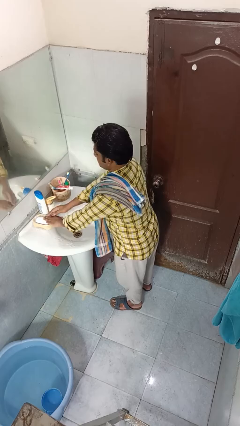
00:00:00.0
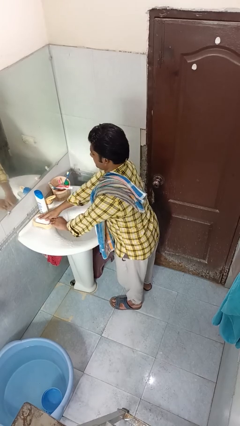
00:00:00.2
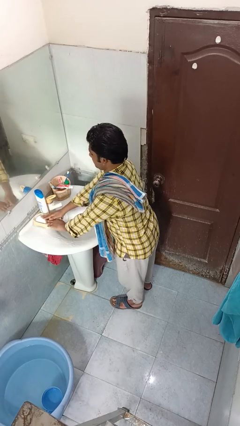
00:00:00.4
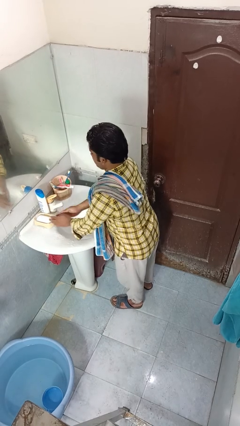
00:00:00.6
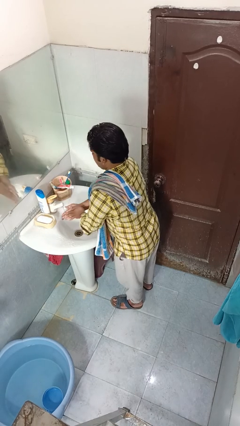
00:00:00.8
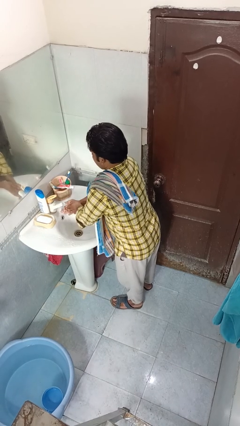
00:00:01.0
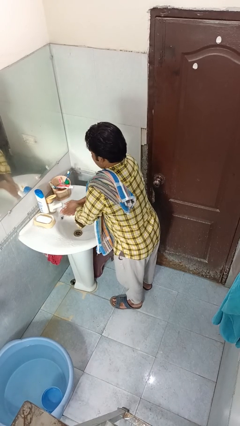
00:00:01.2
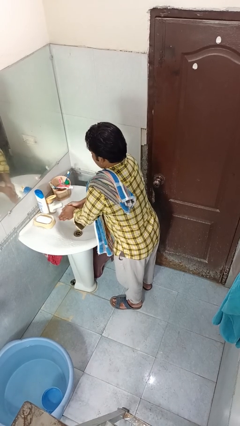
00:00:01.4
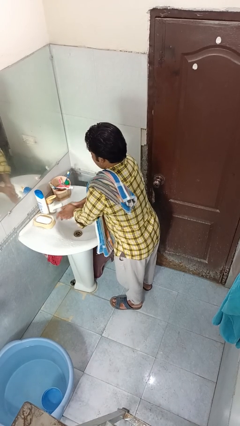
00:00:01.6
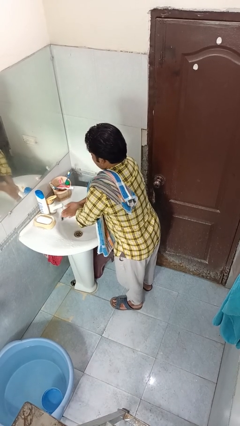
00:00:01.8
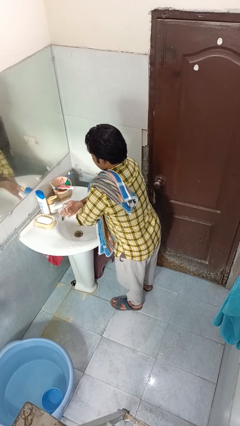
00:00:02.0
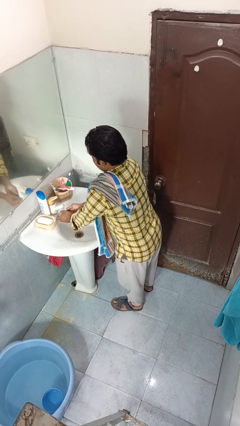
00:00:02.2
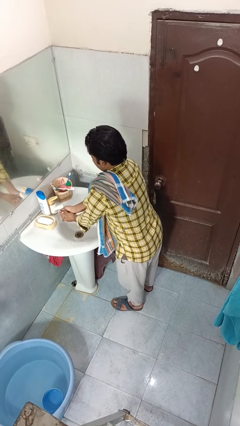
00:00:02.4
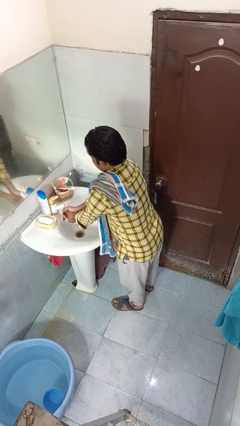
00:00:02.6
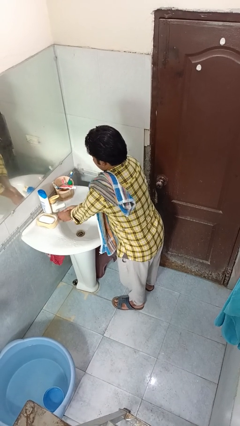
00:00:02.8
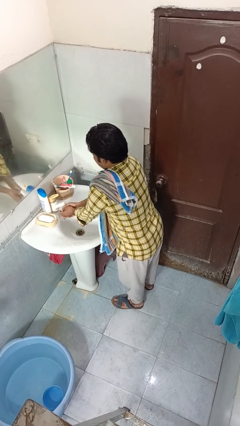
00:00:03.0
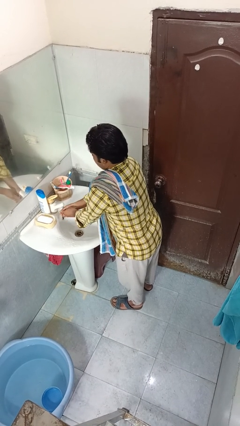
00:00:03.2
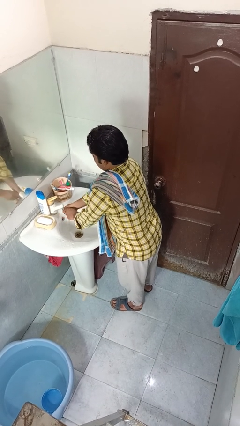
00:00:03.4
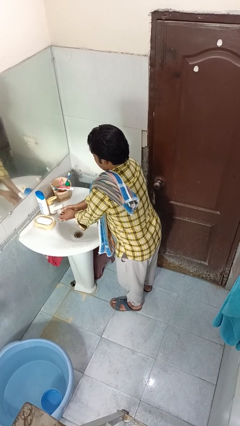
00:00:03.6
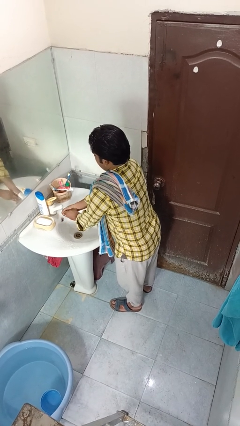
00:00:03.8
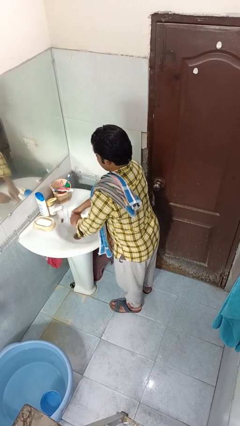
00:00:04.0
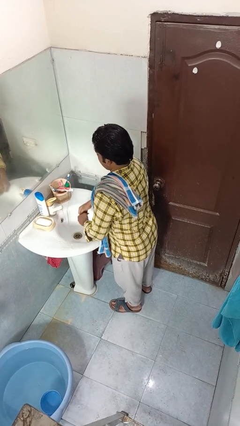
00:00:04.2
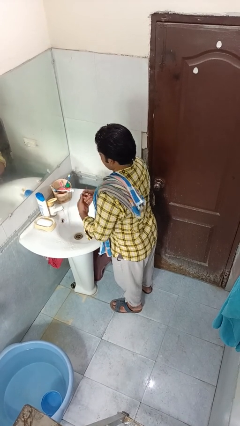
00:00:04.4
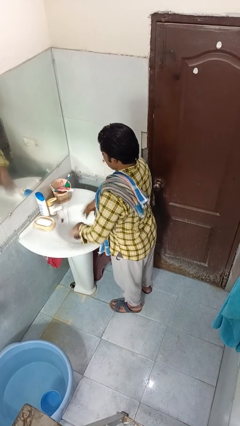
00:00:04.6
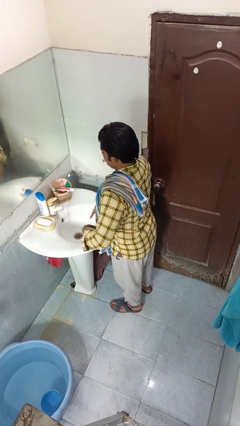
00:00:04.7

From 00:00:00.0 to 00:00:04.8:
person washes hands

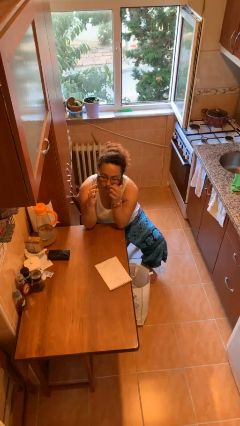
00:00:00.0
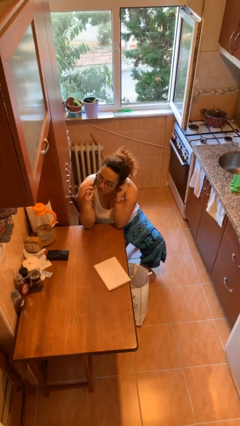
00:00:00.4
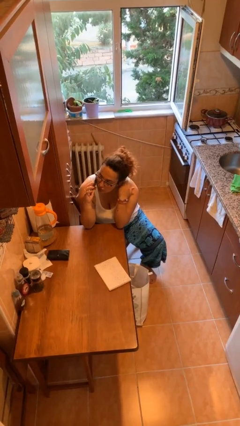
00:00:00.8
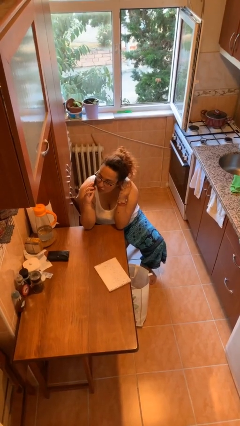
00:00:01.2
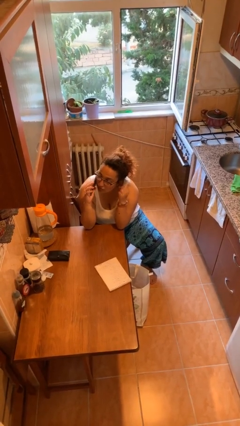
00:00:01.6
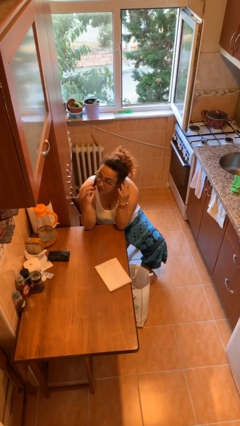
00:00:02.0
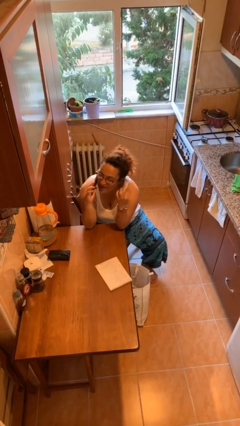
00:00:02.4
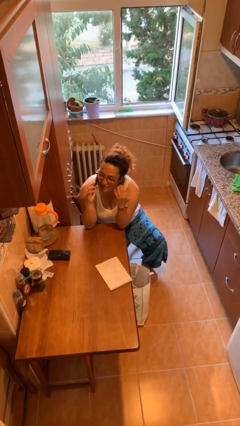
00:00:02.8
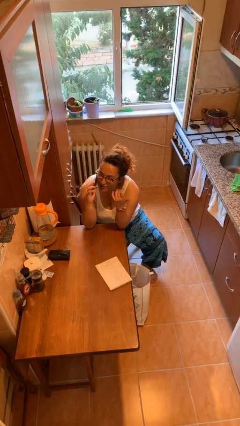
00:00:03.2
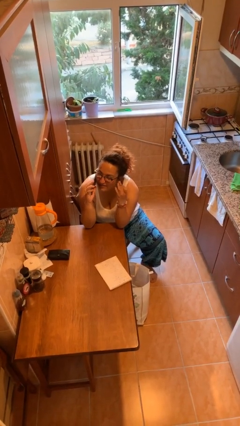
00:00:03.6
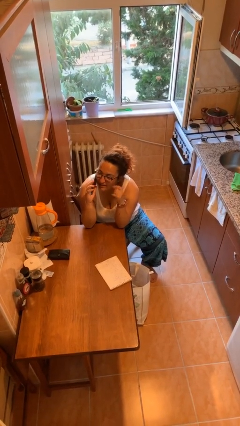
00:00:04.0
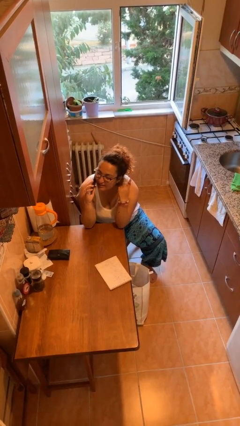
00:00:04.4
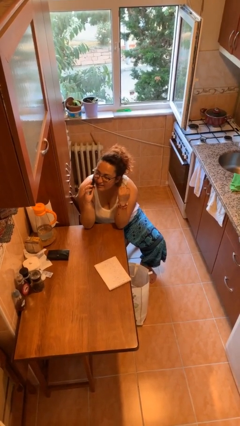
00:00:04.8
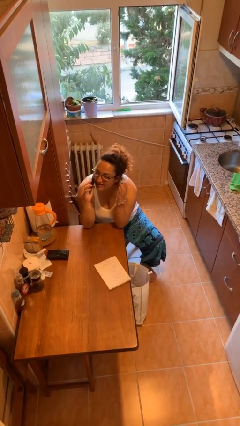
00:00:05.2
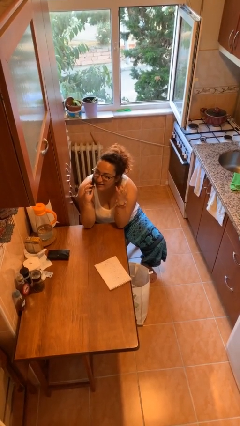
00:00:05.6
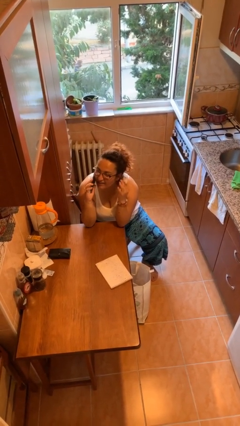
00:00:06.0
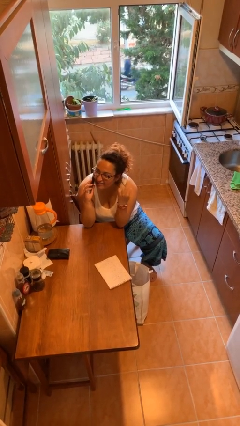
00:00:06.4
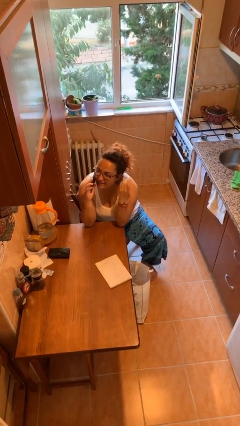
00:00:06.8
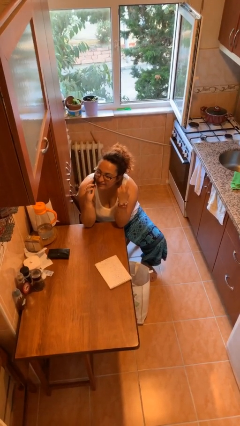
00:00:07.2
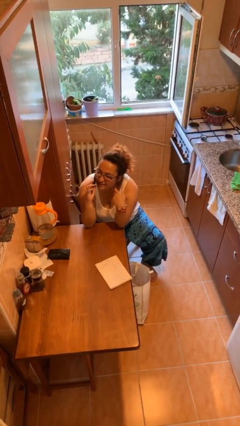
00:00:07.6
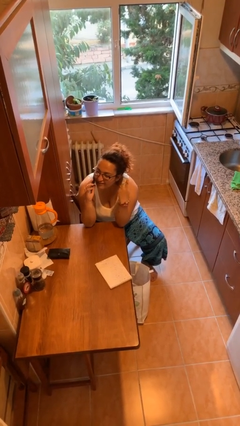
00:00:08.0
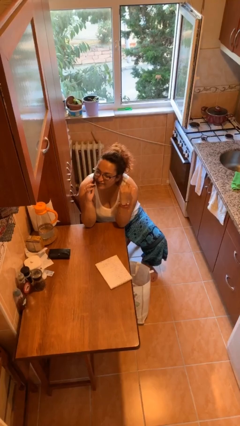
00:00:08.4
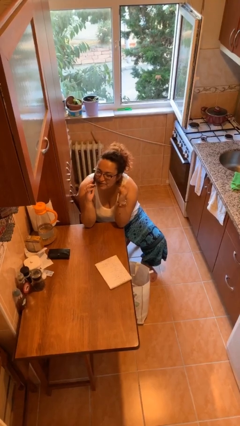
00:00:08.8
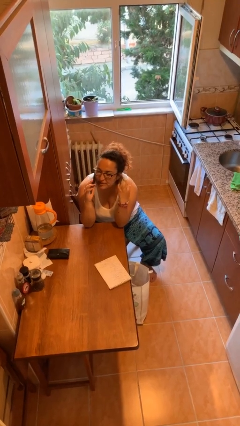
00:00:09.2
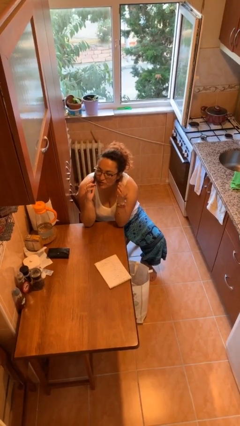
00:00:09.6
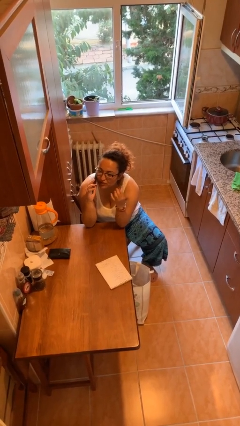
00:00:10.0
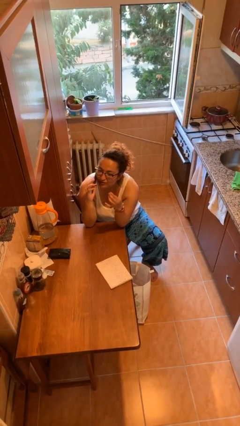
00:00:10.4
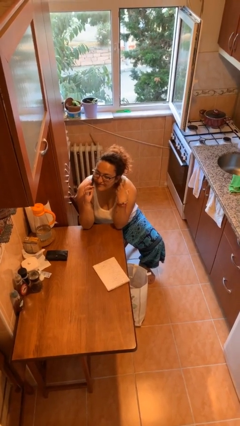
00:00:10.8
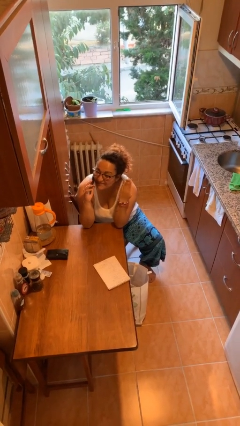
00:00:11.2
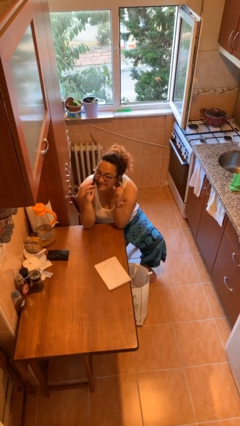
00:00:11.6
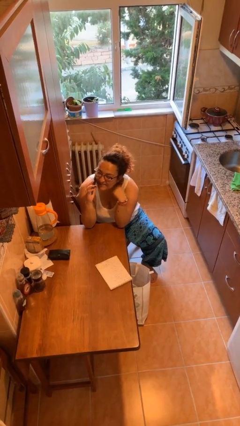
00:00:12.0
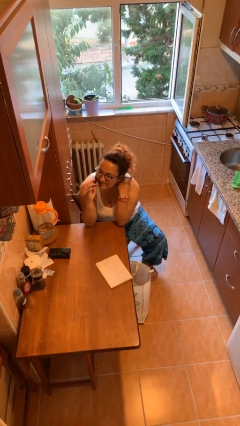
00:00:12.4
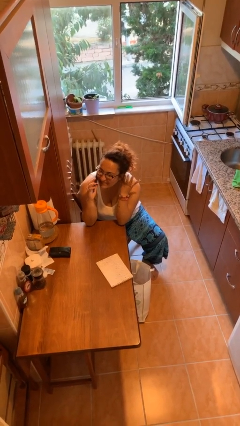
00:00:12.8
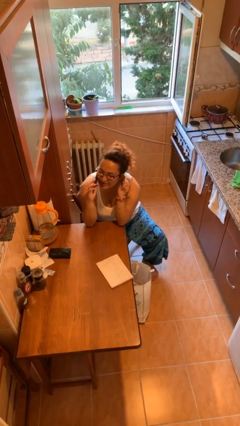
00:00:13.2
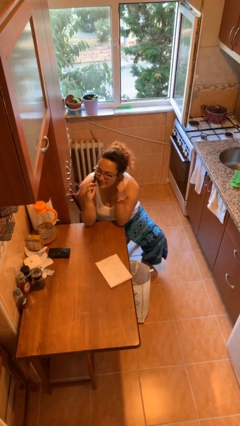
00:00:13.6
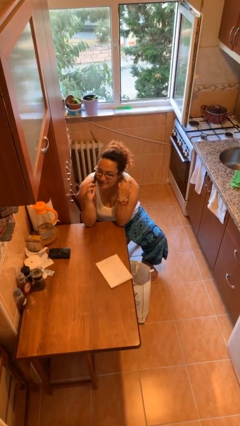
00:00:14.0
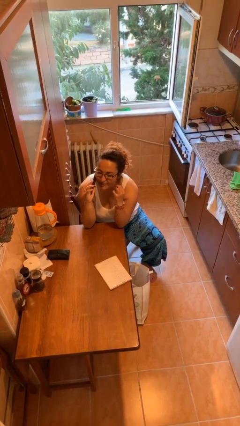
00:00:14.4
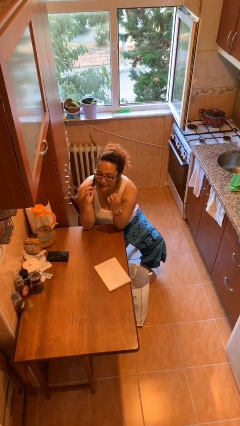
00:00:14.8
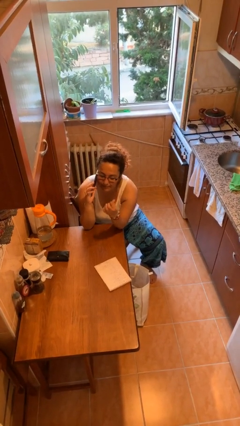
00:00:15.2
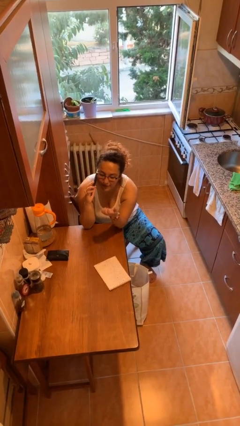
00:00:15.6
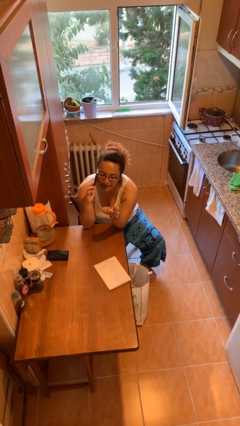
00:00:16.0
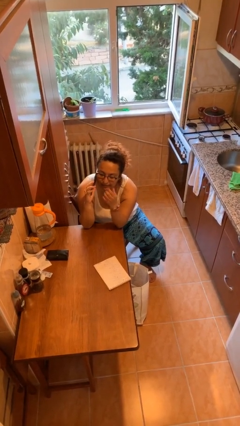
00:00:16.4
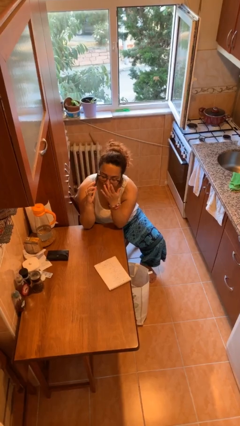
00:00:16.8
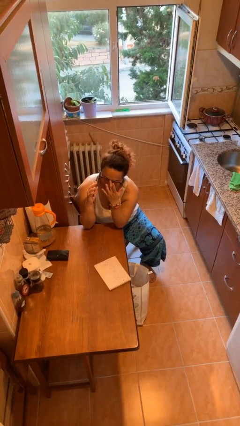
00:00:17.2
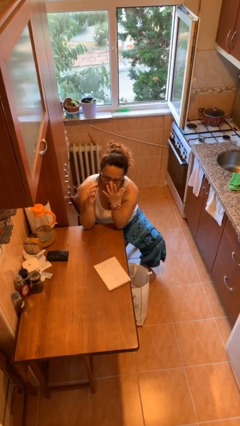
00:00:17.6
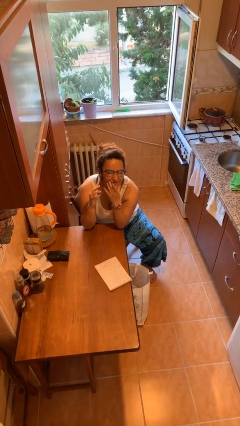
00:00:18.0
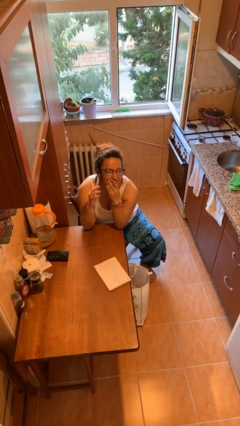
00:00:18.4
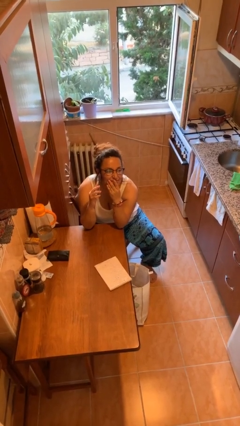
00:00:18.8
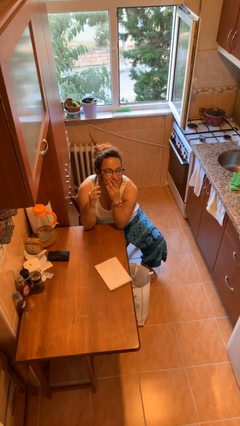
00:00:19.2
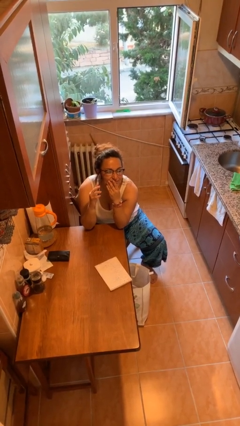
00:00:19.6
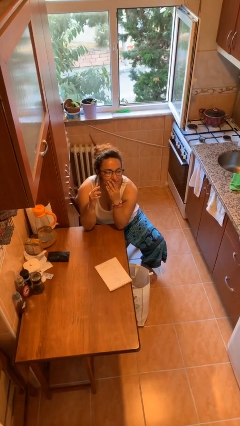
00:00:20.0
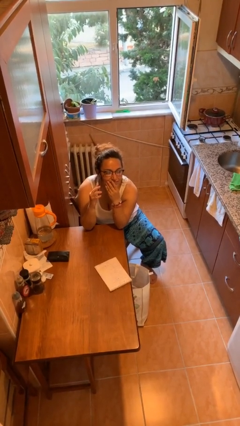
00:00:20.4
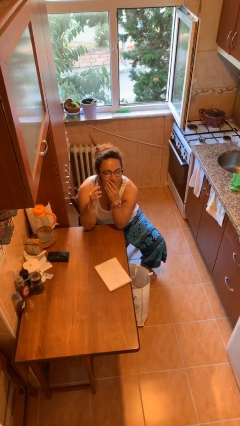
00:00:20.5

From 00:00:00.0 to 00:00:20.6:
person talks on phone

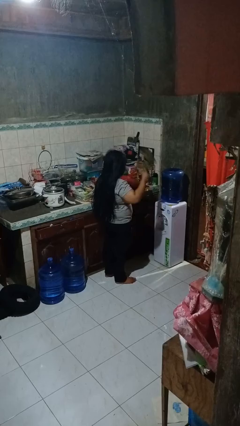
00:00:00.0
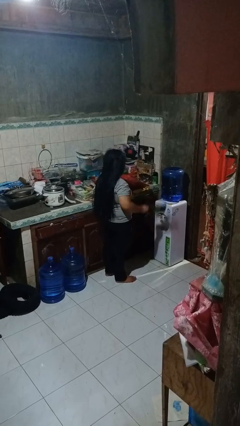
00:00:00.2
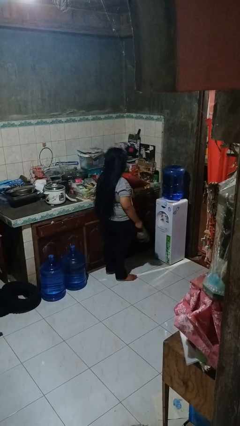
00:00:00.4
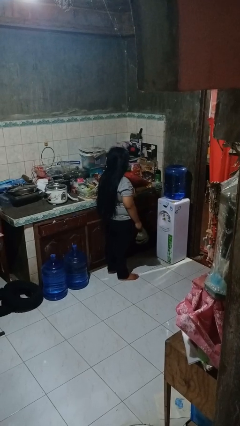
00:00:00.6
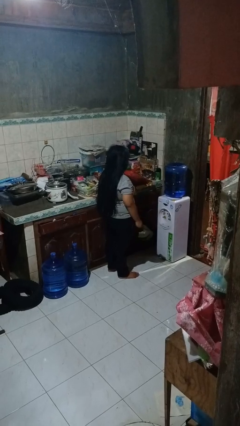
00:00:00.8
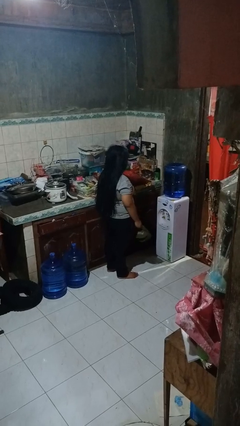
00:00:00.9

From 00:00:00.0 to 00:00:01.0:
person takes off hat

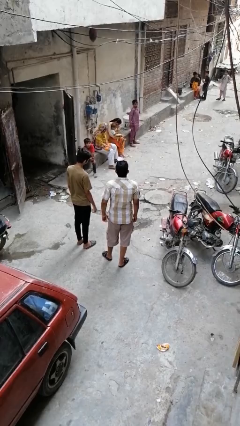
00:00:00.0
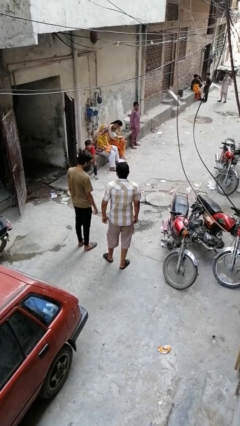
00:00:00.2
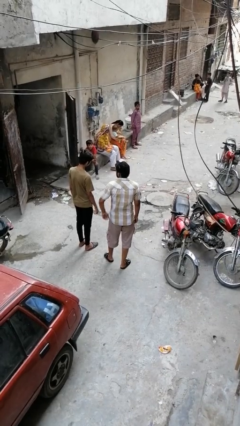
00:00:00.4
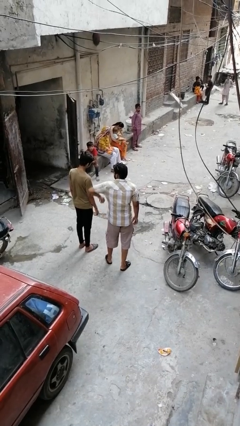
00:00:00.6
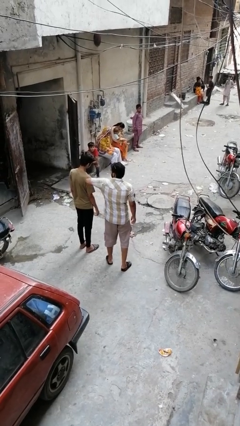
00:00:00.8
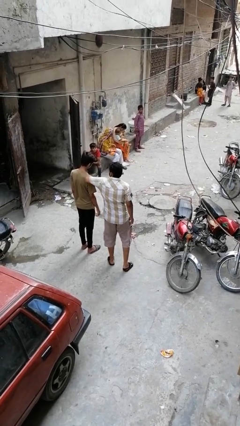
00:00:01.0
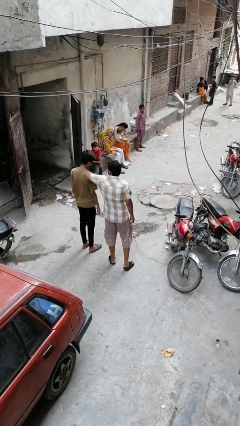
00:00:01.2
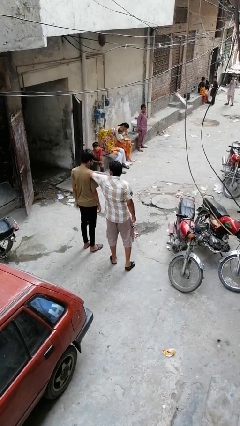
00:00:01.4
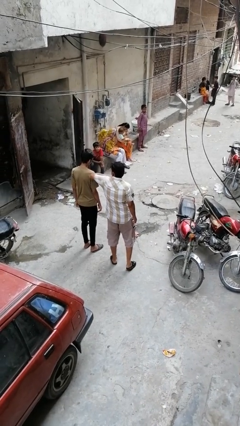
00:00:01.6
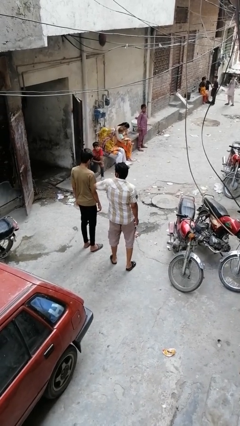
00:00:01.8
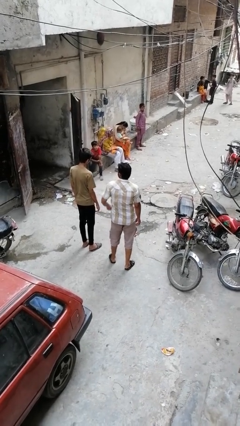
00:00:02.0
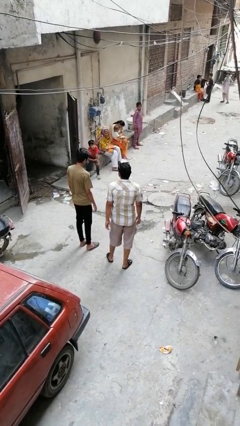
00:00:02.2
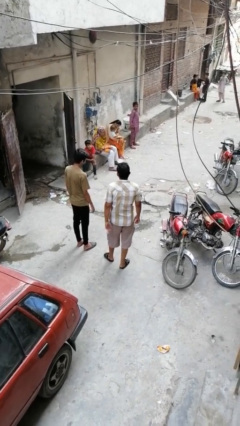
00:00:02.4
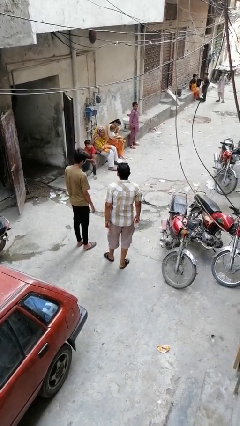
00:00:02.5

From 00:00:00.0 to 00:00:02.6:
person nudges person with elbow
